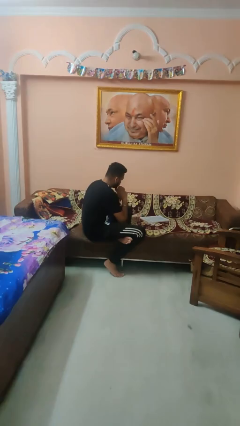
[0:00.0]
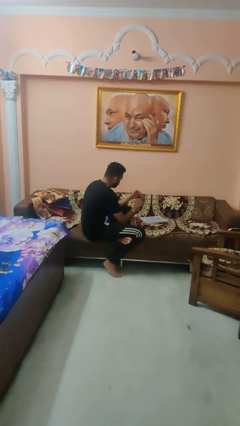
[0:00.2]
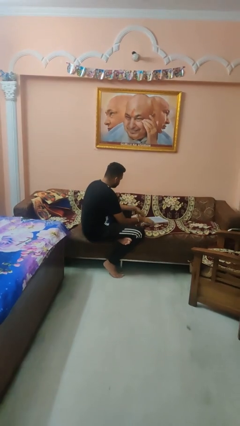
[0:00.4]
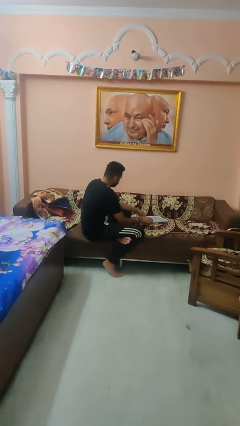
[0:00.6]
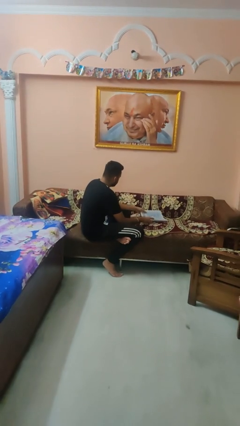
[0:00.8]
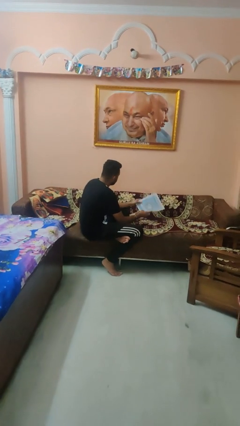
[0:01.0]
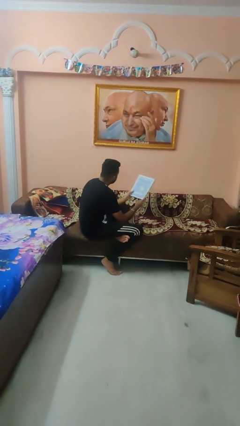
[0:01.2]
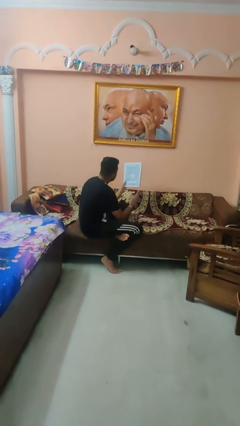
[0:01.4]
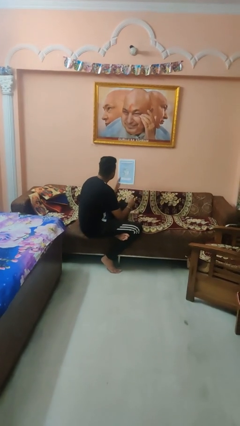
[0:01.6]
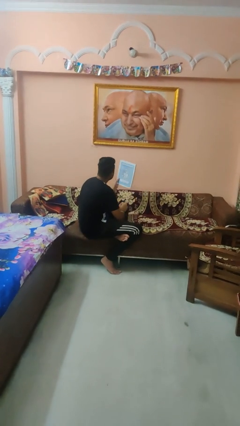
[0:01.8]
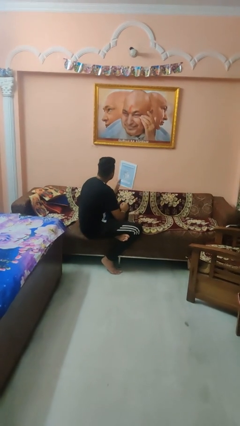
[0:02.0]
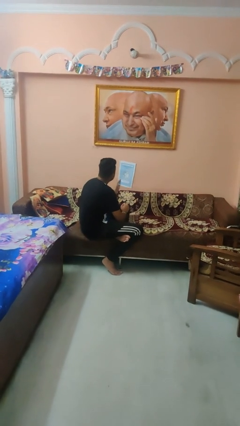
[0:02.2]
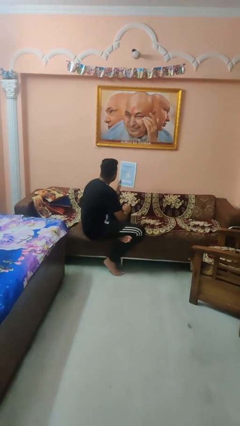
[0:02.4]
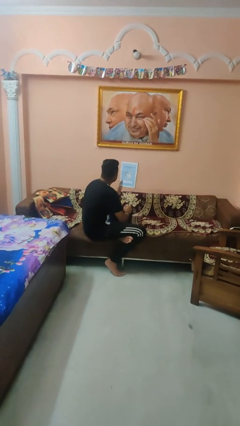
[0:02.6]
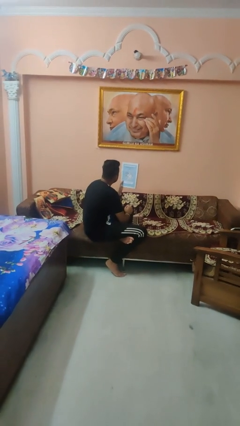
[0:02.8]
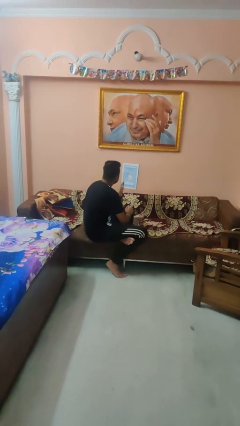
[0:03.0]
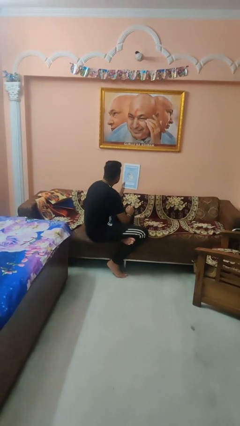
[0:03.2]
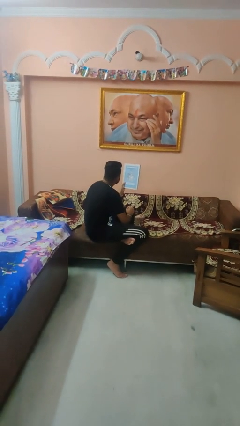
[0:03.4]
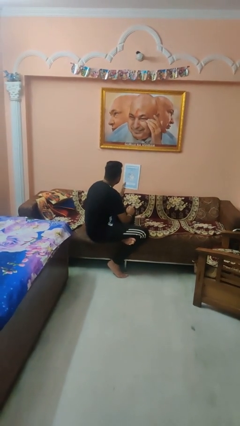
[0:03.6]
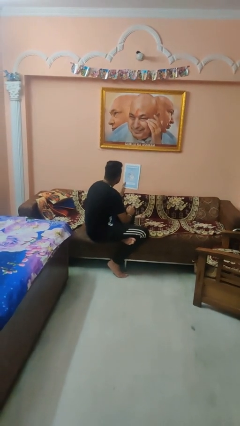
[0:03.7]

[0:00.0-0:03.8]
person picks up object from couch

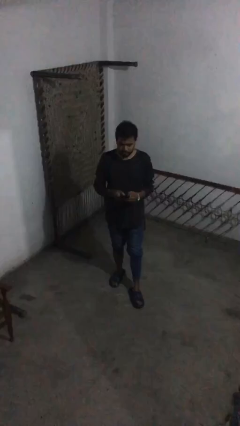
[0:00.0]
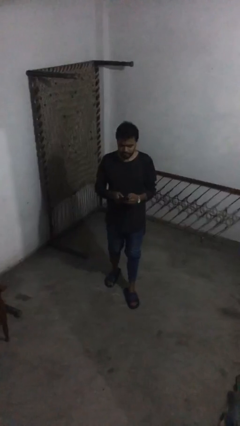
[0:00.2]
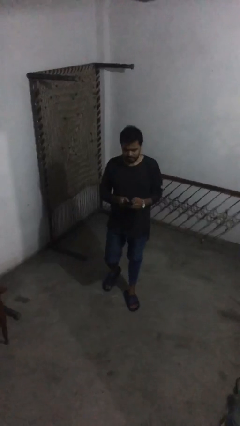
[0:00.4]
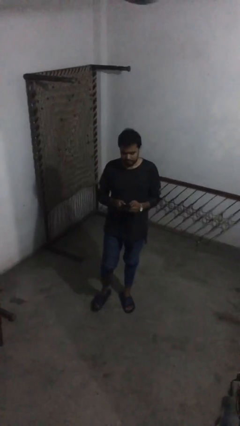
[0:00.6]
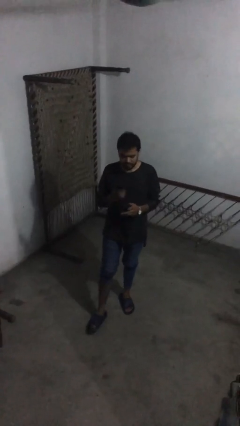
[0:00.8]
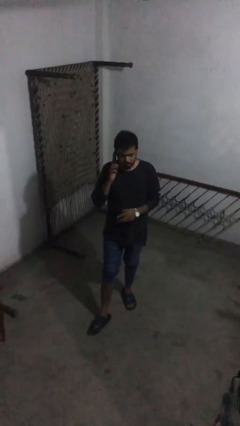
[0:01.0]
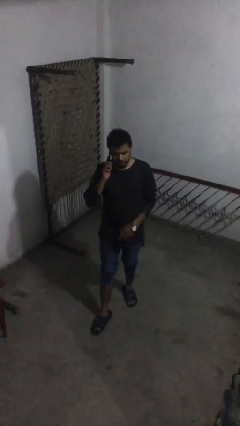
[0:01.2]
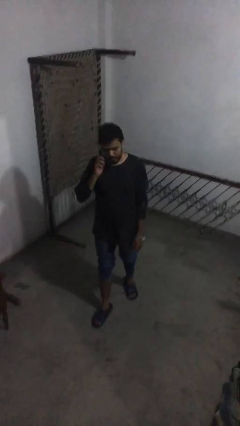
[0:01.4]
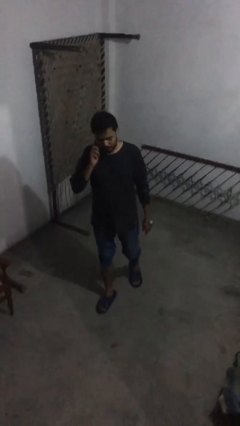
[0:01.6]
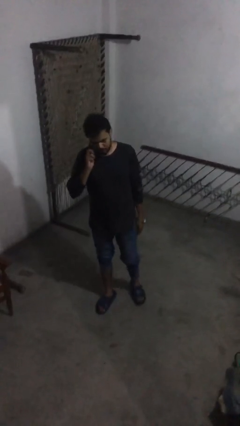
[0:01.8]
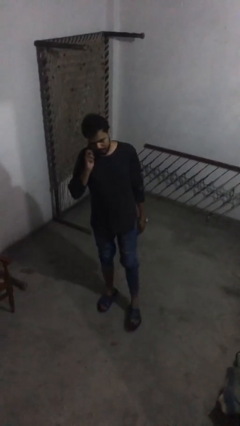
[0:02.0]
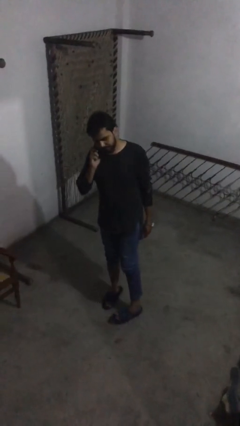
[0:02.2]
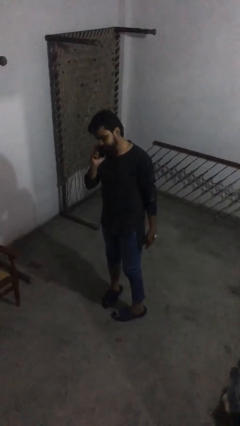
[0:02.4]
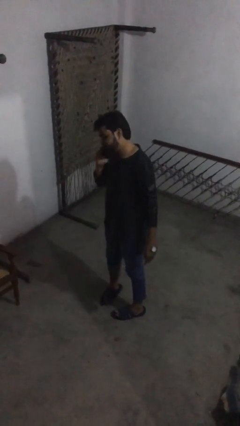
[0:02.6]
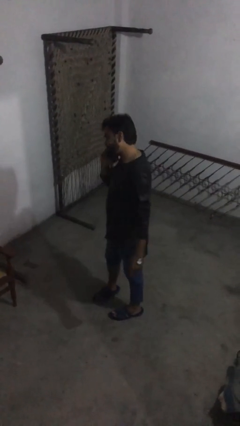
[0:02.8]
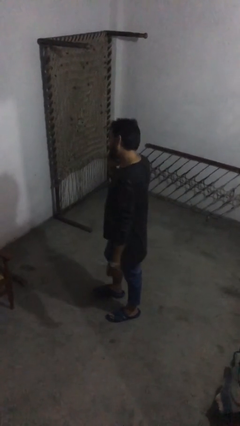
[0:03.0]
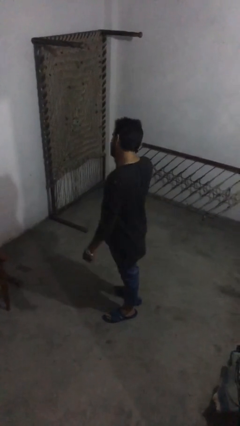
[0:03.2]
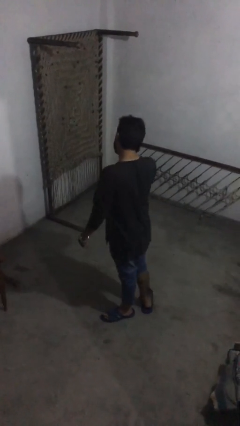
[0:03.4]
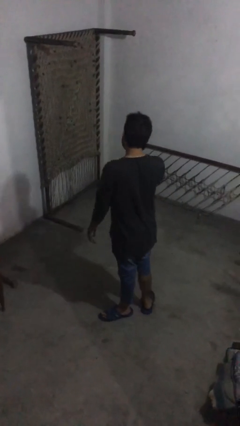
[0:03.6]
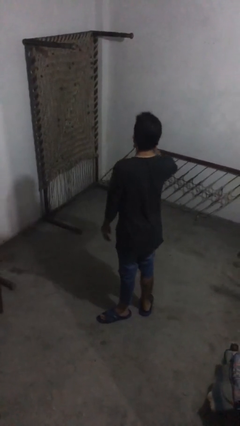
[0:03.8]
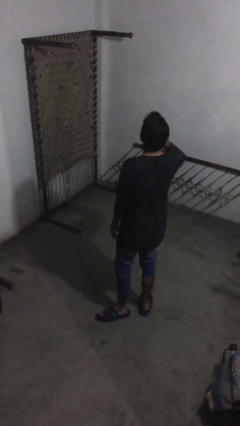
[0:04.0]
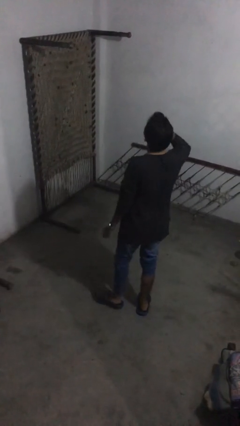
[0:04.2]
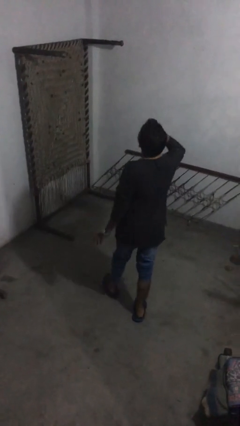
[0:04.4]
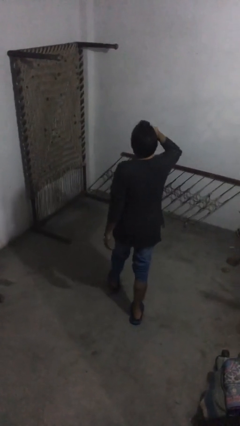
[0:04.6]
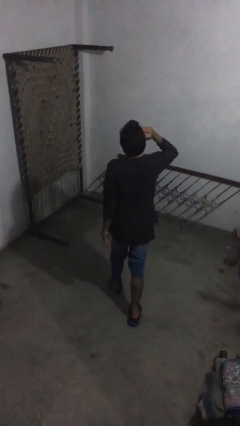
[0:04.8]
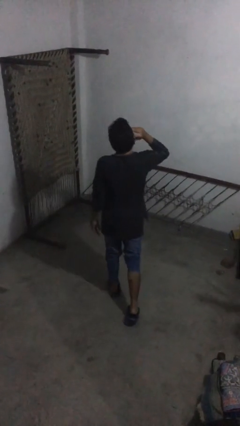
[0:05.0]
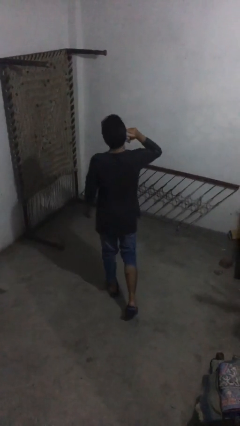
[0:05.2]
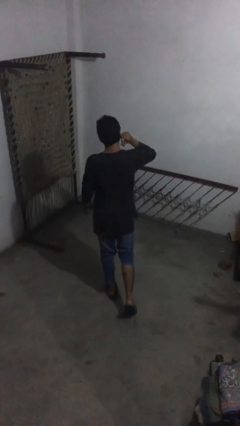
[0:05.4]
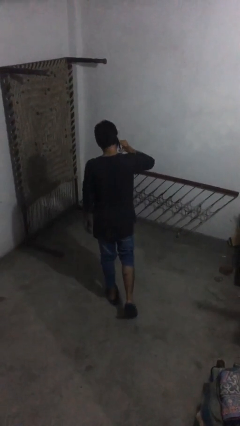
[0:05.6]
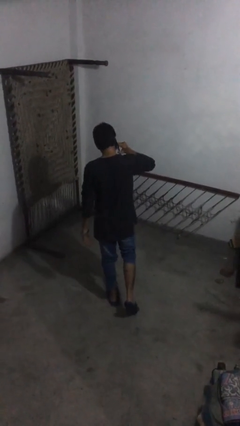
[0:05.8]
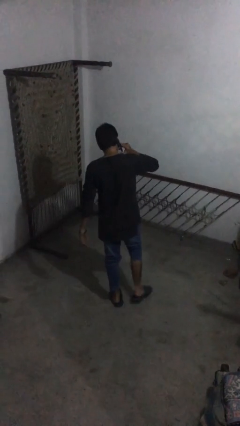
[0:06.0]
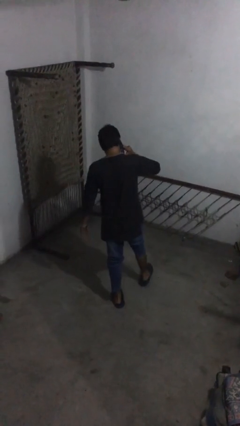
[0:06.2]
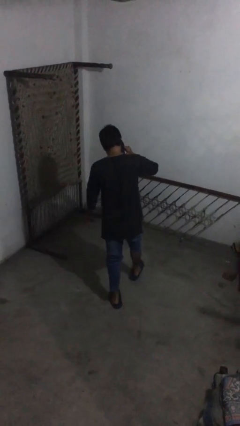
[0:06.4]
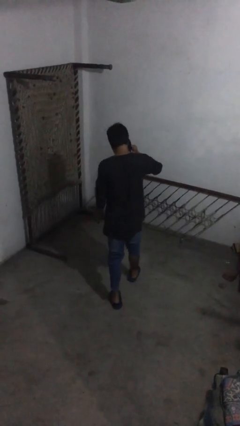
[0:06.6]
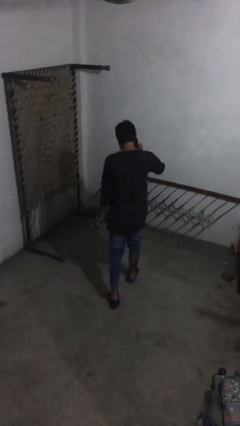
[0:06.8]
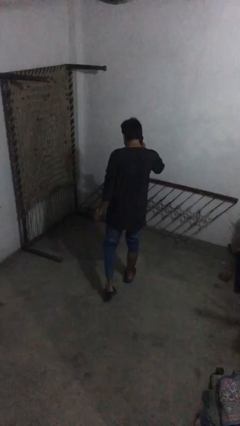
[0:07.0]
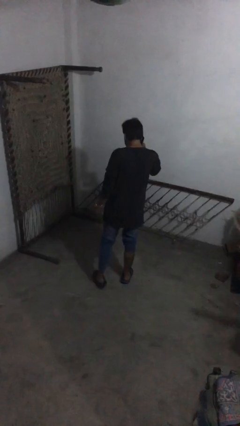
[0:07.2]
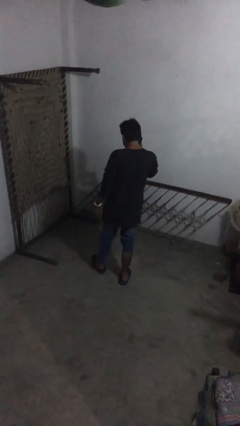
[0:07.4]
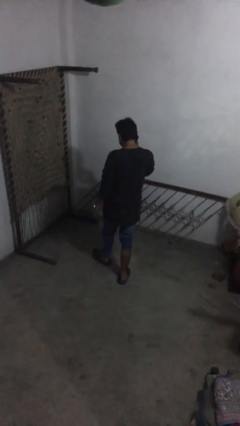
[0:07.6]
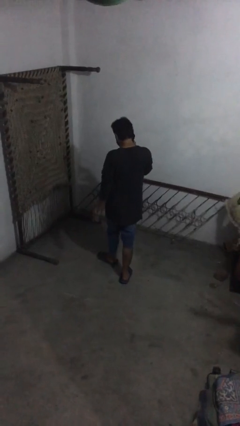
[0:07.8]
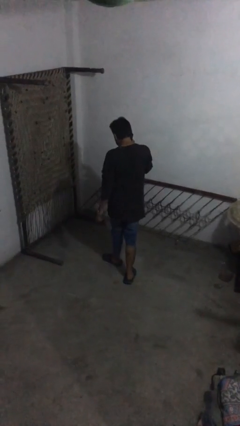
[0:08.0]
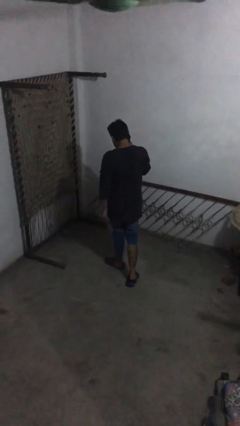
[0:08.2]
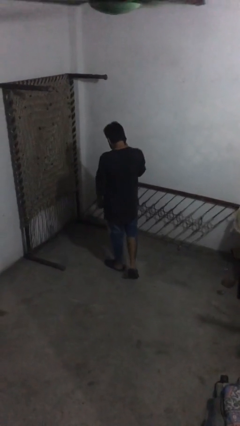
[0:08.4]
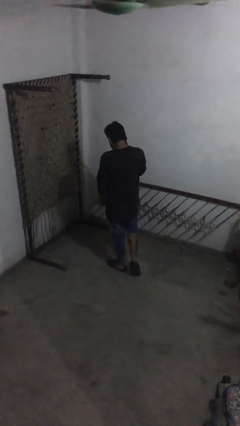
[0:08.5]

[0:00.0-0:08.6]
person talks on phone

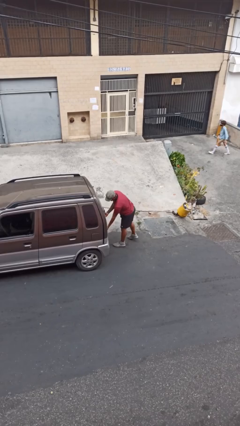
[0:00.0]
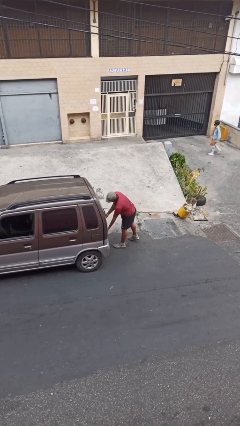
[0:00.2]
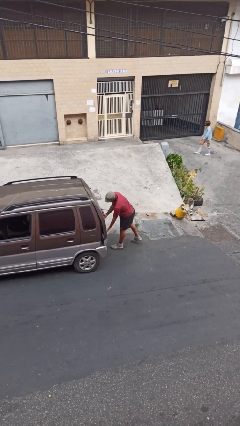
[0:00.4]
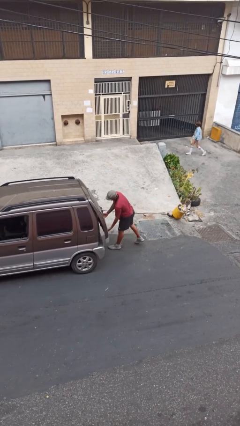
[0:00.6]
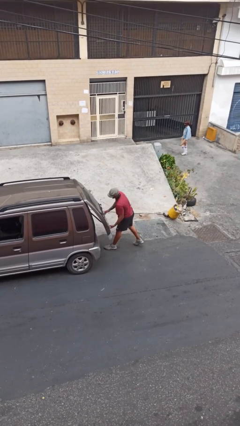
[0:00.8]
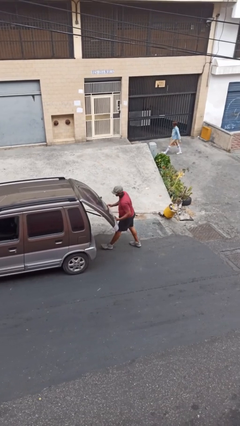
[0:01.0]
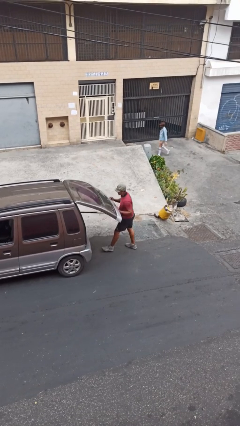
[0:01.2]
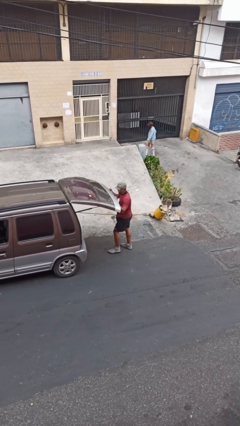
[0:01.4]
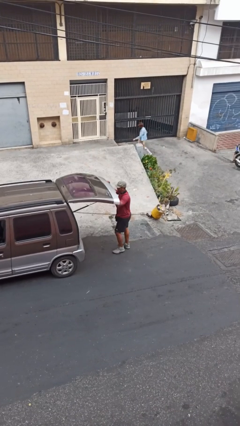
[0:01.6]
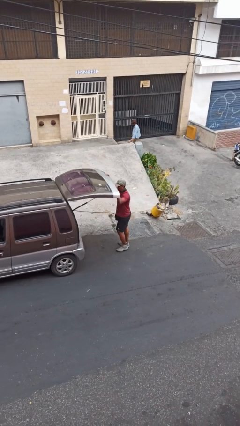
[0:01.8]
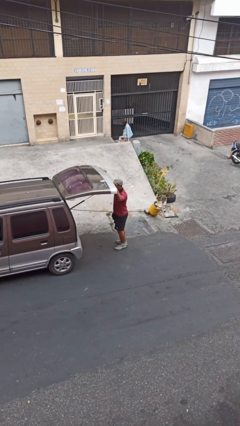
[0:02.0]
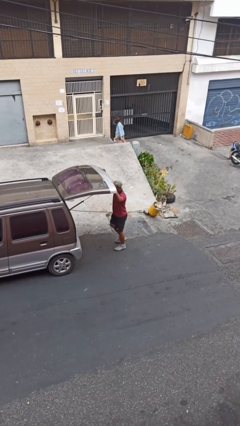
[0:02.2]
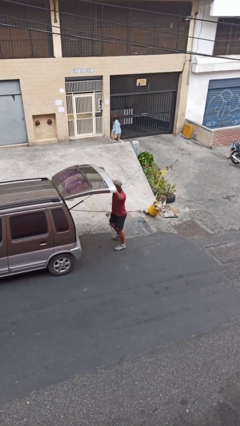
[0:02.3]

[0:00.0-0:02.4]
person opens car trunk

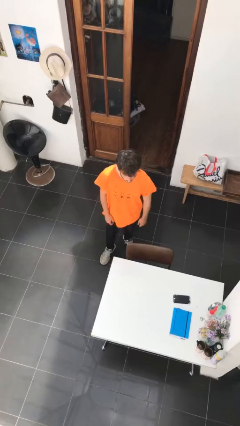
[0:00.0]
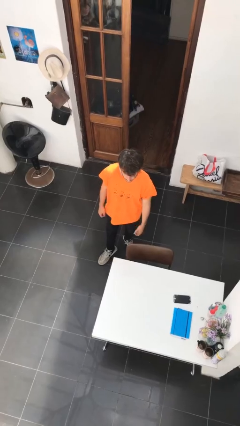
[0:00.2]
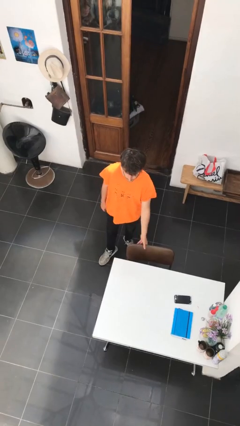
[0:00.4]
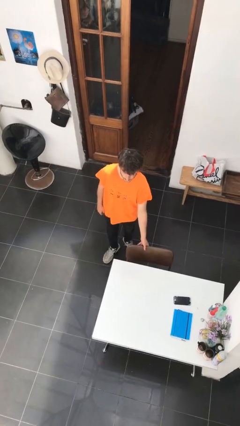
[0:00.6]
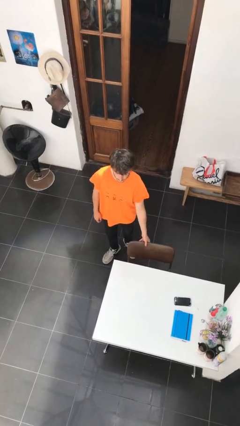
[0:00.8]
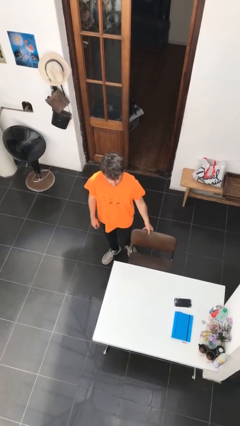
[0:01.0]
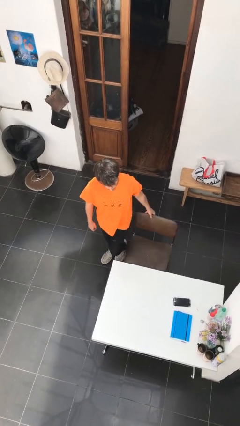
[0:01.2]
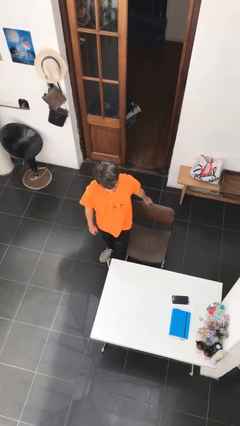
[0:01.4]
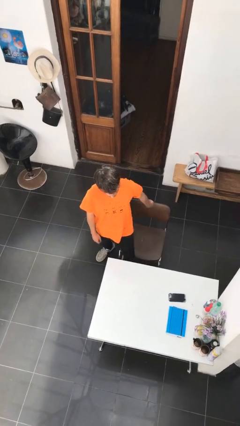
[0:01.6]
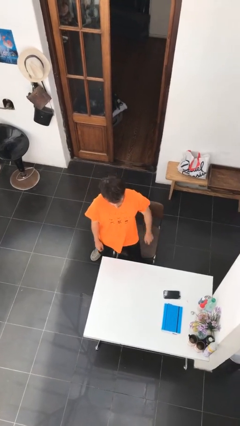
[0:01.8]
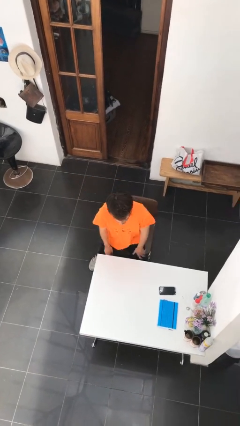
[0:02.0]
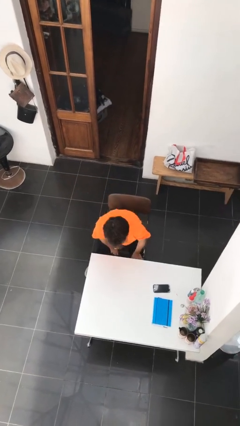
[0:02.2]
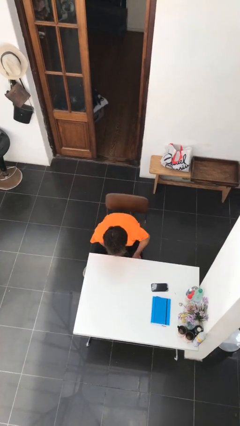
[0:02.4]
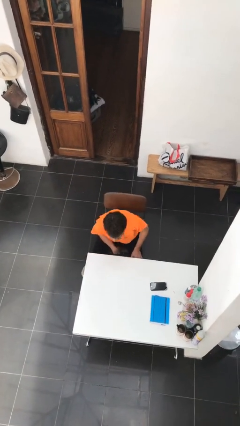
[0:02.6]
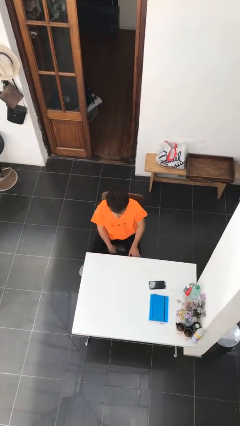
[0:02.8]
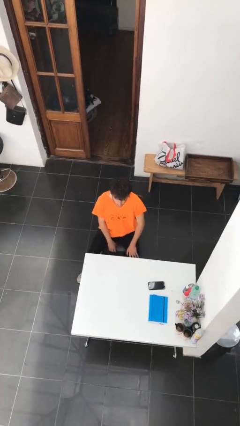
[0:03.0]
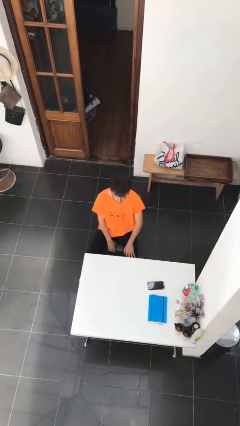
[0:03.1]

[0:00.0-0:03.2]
person sits down
